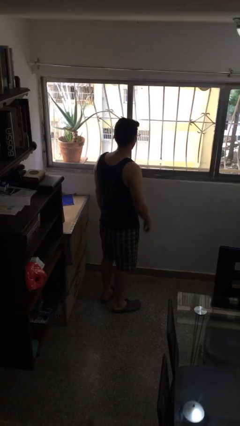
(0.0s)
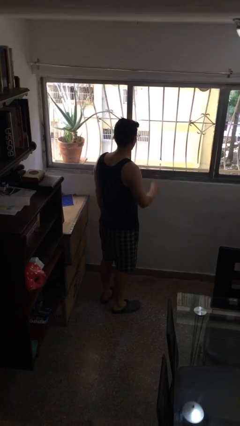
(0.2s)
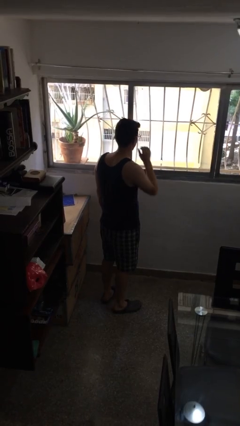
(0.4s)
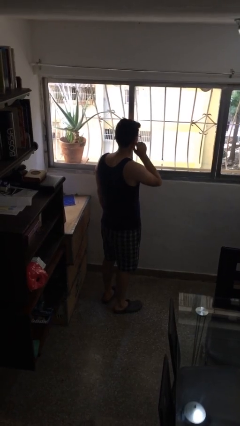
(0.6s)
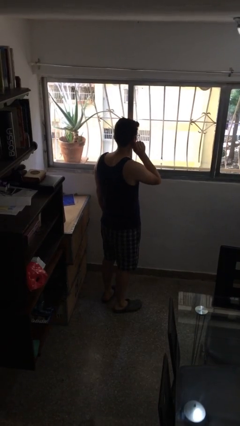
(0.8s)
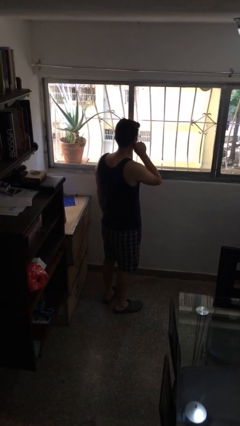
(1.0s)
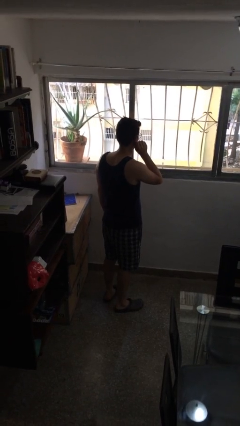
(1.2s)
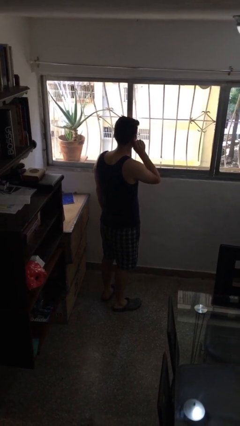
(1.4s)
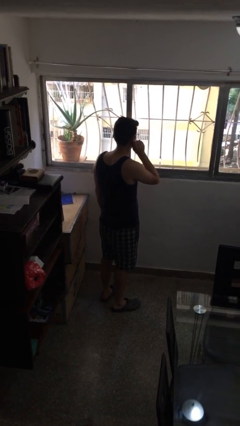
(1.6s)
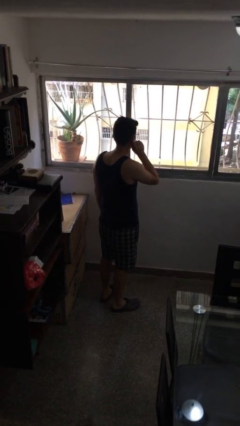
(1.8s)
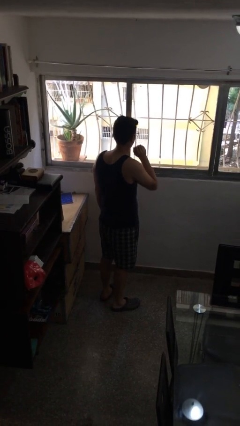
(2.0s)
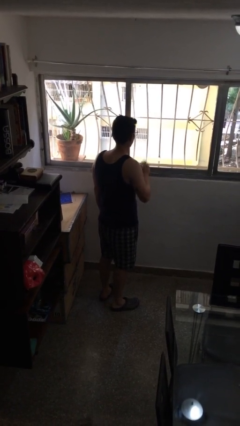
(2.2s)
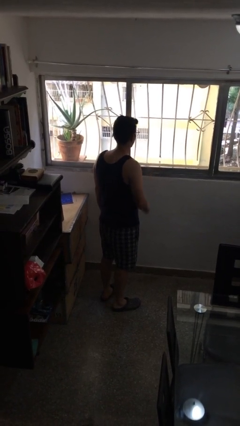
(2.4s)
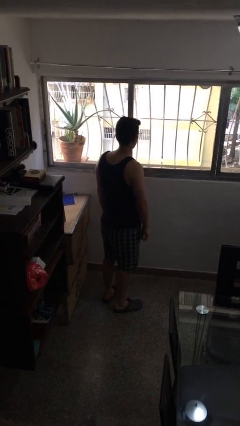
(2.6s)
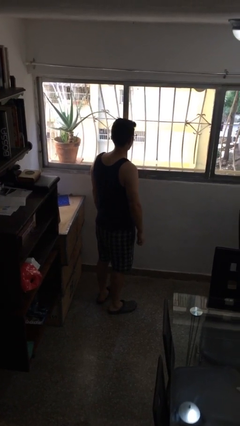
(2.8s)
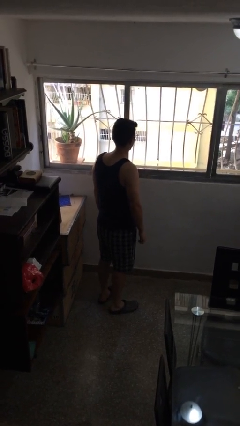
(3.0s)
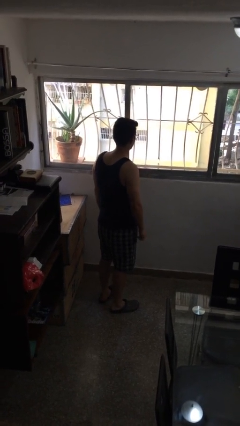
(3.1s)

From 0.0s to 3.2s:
person touches earlobe

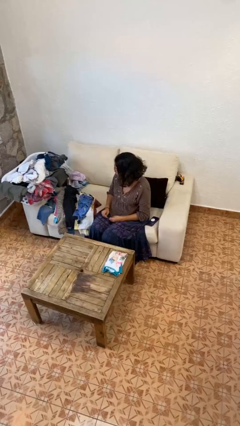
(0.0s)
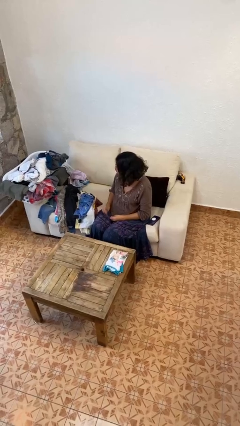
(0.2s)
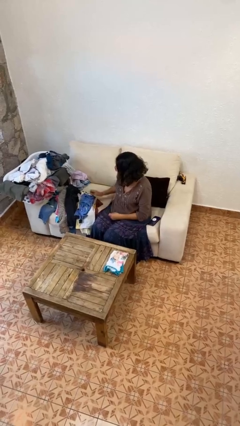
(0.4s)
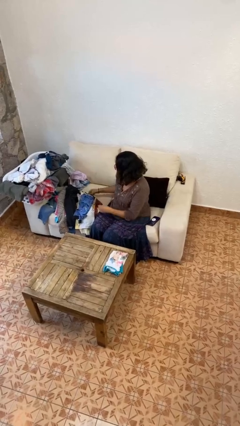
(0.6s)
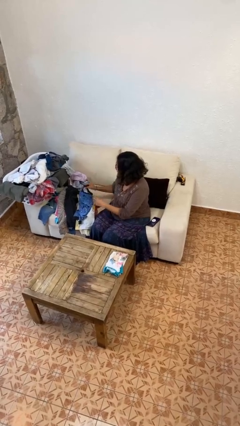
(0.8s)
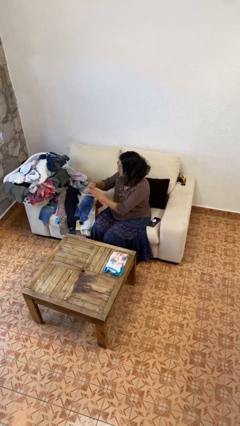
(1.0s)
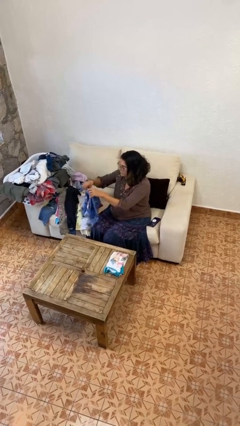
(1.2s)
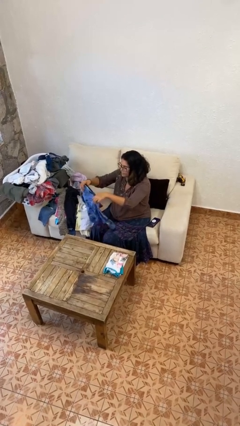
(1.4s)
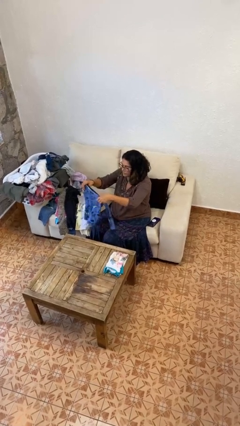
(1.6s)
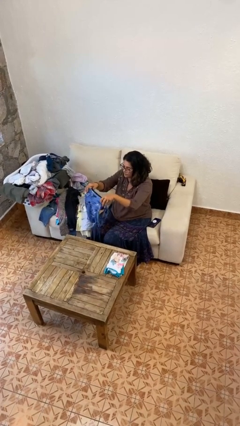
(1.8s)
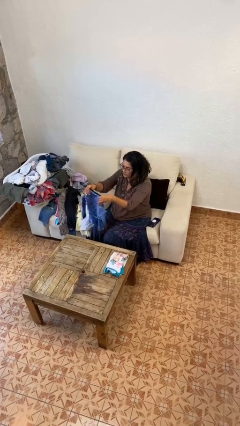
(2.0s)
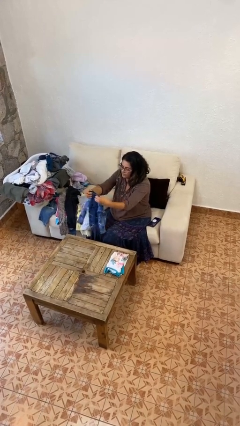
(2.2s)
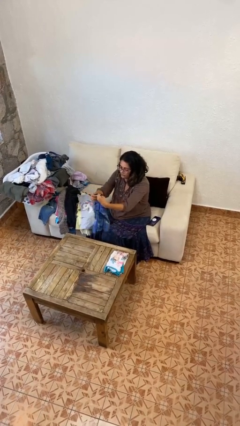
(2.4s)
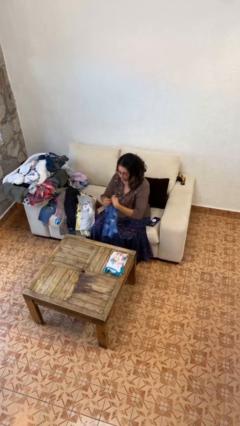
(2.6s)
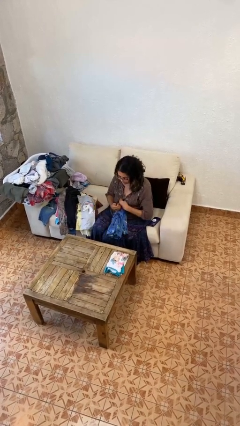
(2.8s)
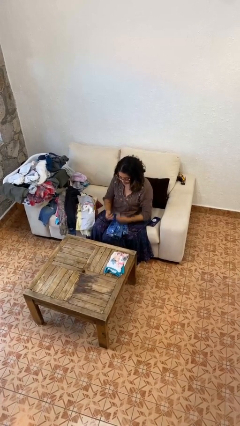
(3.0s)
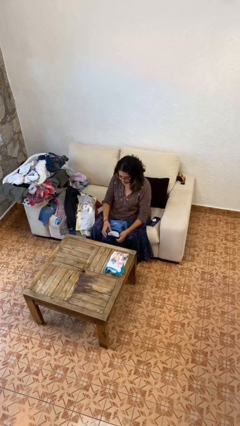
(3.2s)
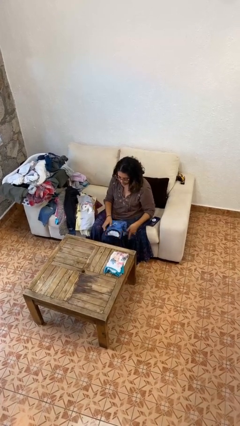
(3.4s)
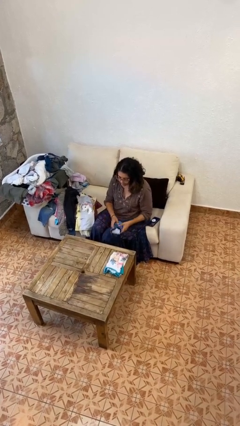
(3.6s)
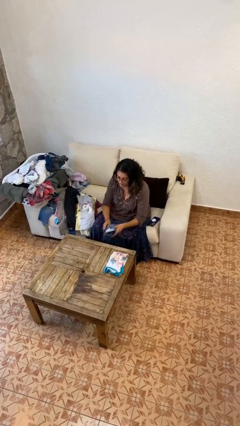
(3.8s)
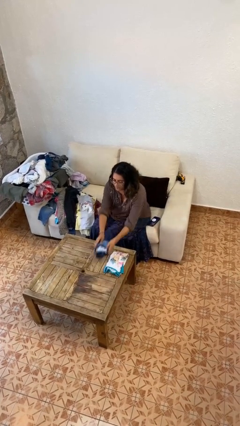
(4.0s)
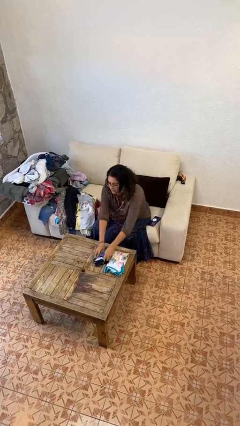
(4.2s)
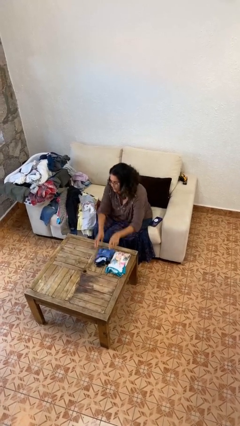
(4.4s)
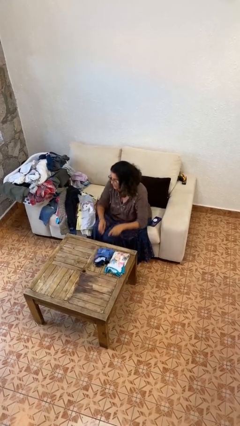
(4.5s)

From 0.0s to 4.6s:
person folds shirt

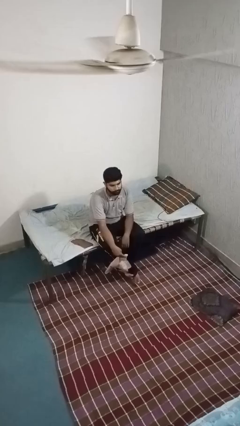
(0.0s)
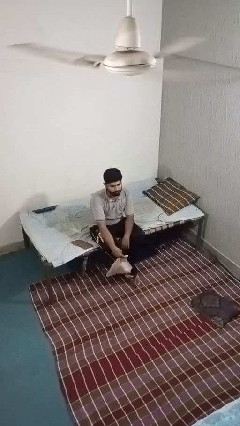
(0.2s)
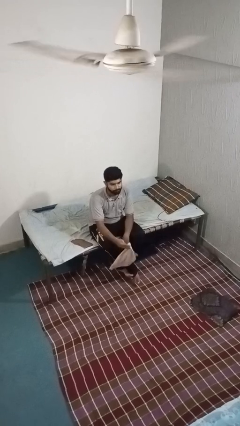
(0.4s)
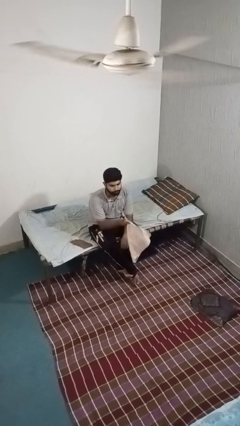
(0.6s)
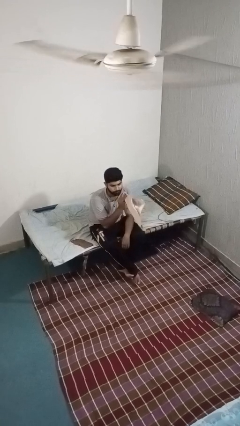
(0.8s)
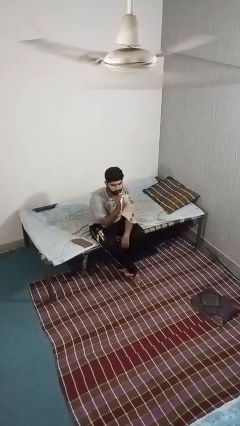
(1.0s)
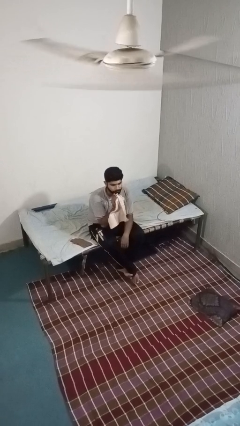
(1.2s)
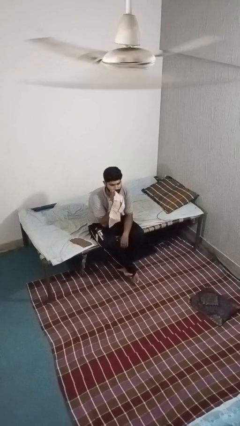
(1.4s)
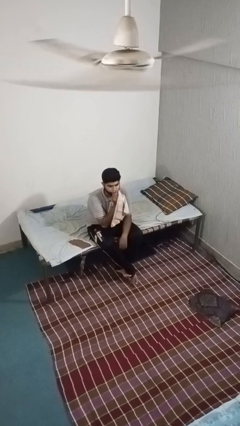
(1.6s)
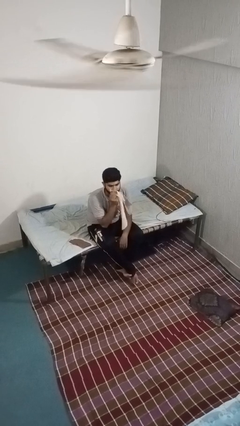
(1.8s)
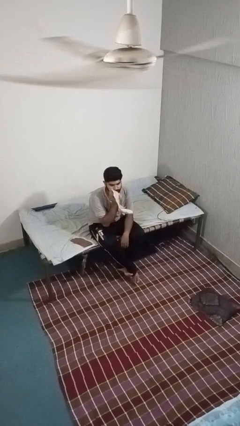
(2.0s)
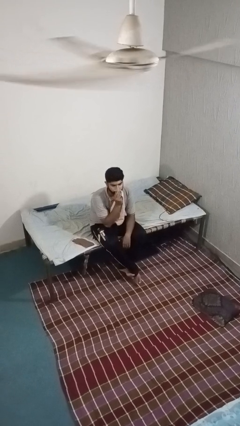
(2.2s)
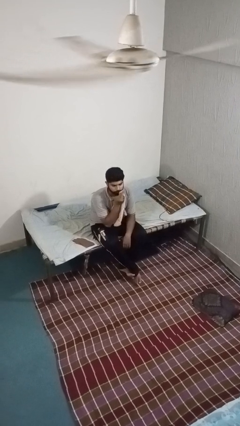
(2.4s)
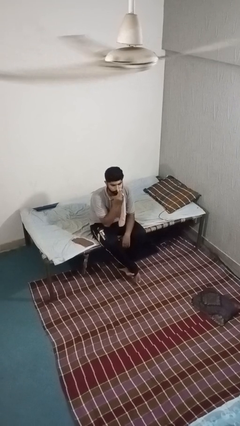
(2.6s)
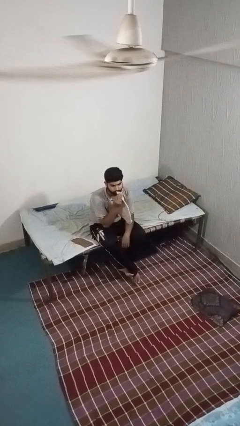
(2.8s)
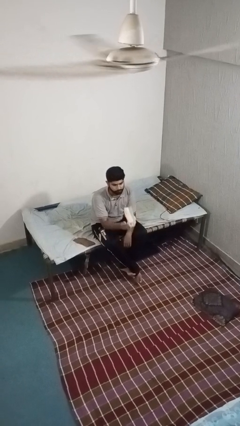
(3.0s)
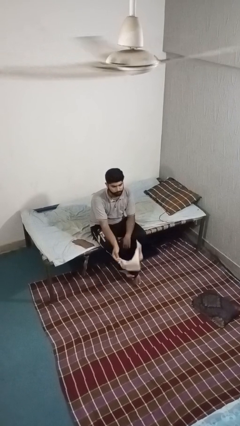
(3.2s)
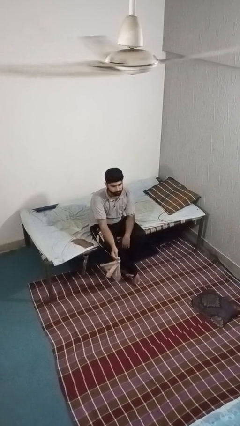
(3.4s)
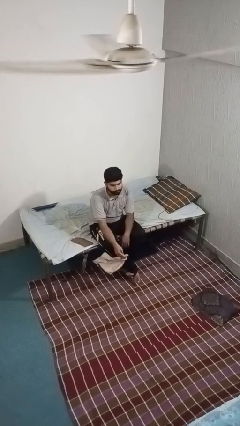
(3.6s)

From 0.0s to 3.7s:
person wipes mouth with napkin

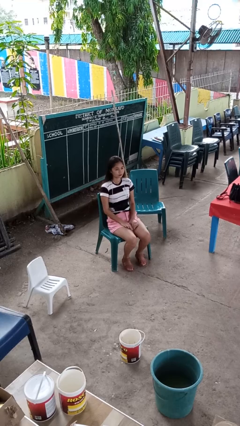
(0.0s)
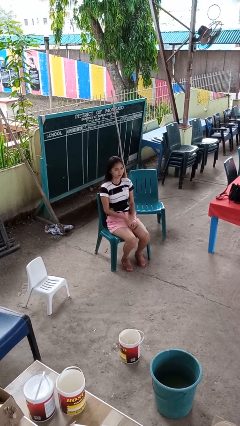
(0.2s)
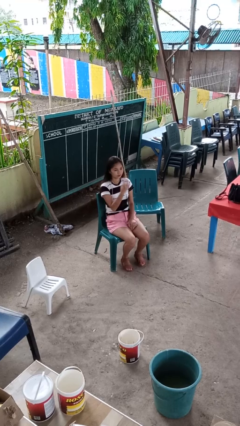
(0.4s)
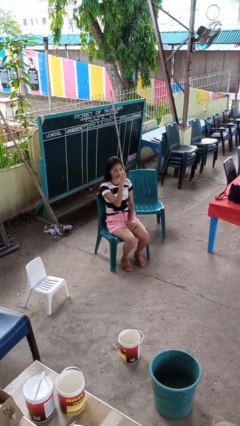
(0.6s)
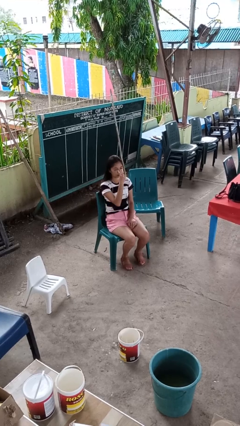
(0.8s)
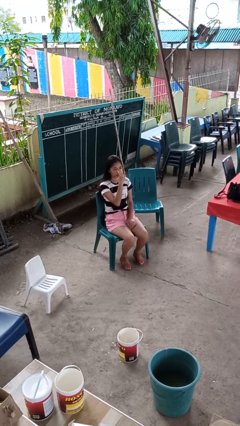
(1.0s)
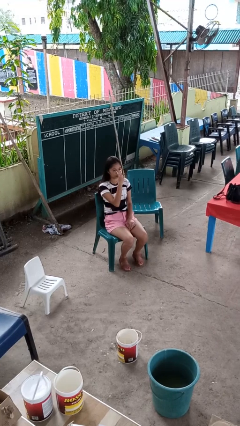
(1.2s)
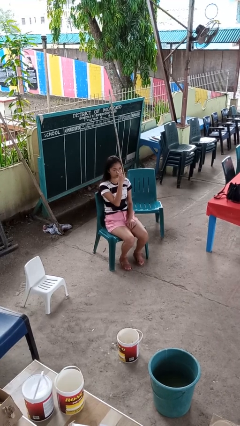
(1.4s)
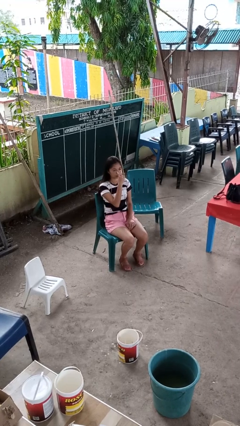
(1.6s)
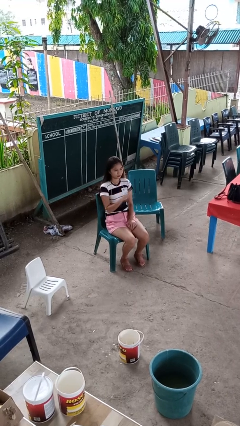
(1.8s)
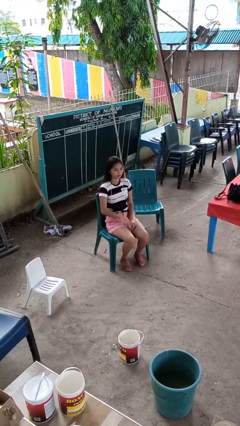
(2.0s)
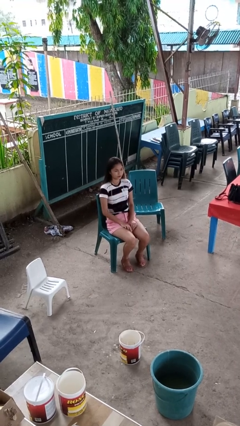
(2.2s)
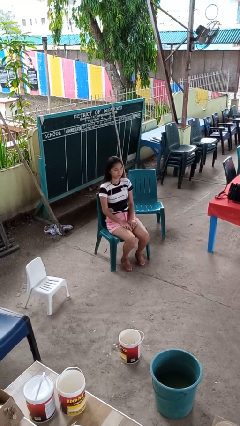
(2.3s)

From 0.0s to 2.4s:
person gestures watch closely

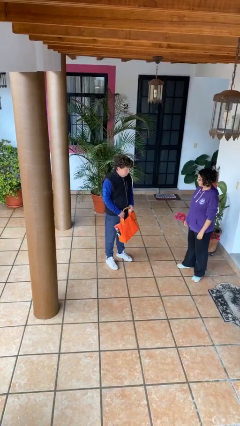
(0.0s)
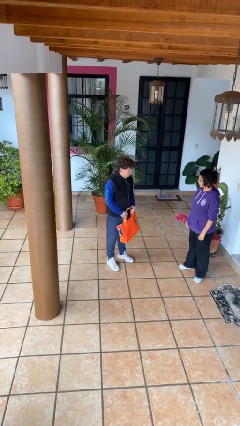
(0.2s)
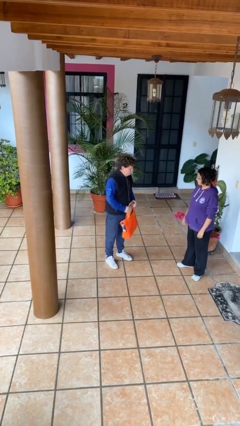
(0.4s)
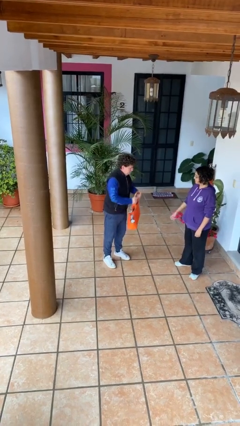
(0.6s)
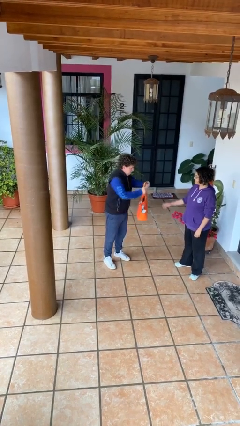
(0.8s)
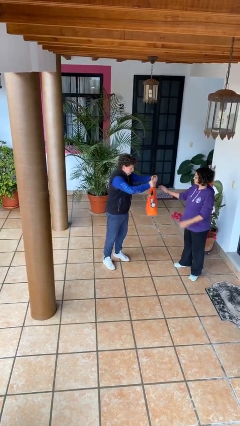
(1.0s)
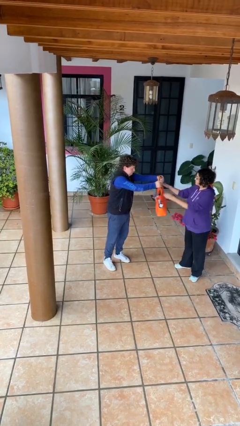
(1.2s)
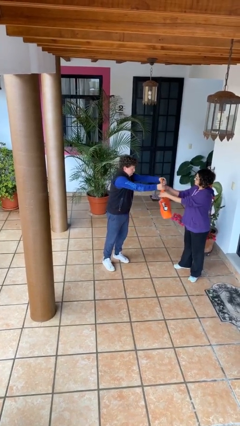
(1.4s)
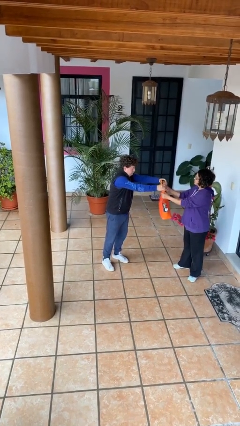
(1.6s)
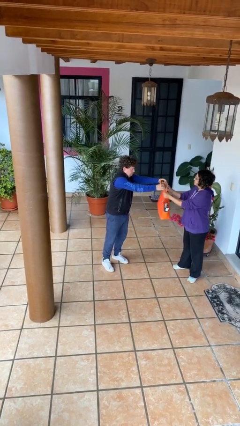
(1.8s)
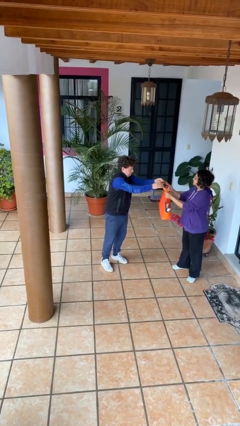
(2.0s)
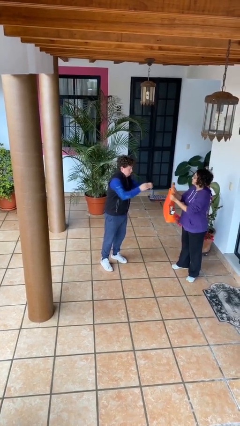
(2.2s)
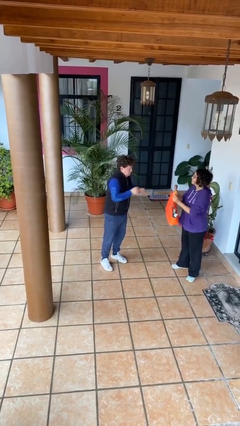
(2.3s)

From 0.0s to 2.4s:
person transfers object to person

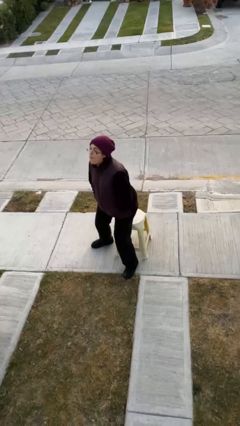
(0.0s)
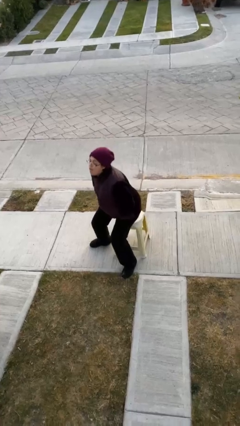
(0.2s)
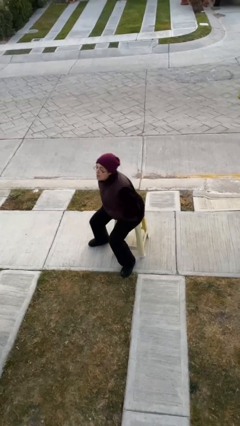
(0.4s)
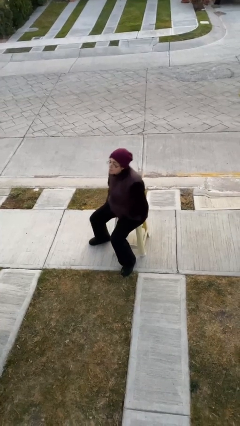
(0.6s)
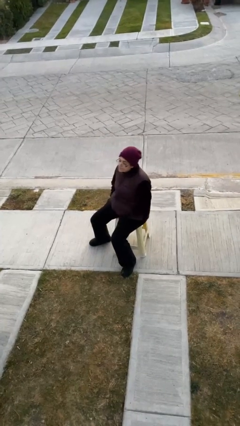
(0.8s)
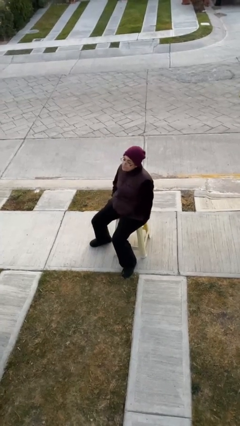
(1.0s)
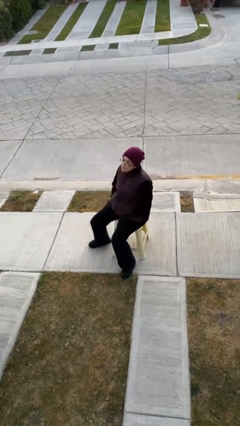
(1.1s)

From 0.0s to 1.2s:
person sits down

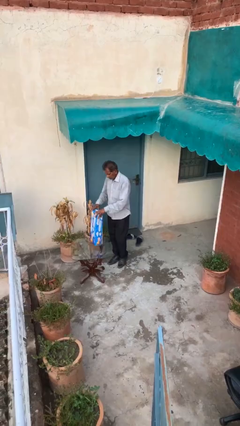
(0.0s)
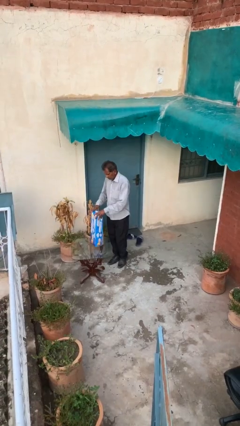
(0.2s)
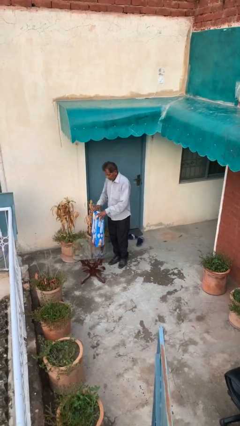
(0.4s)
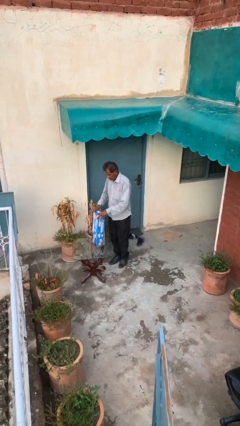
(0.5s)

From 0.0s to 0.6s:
person puts down object on table
